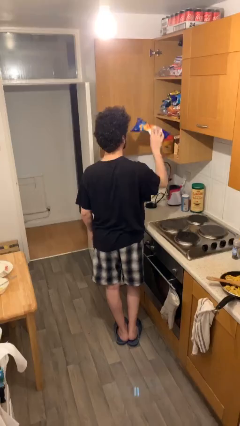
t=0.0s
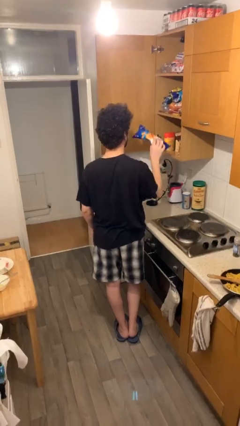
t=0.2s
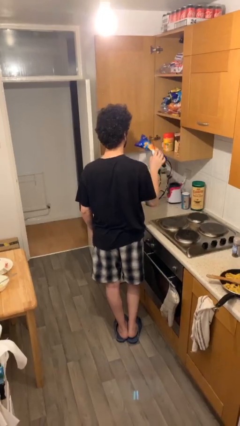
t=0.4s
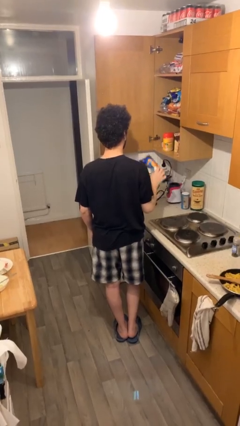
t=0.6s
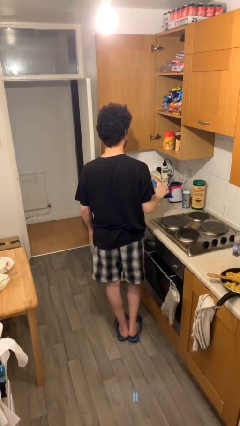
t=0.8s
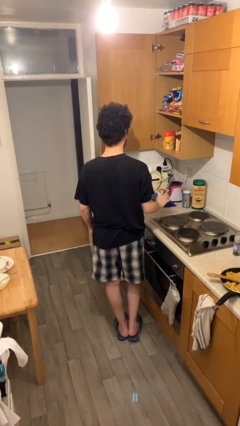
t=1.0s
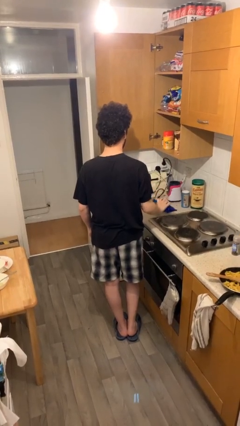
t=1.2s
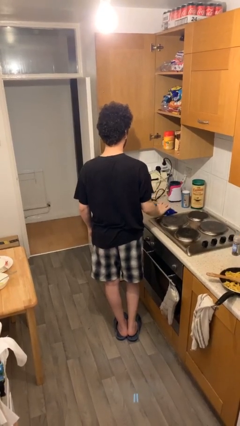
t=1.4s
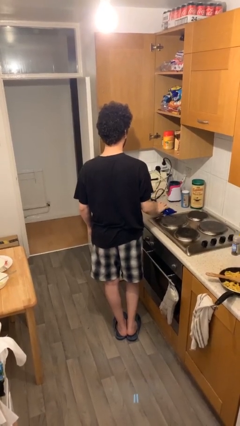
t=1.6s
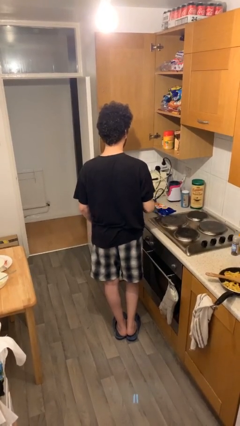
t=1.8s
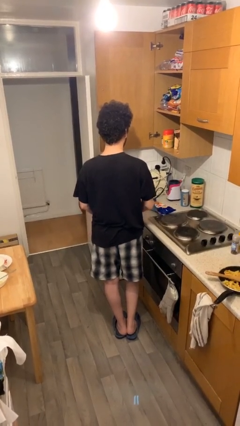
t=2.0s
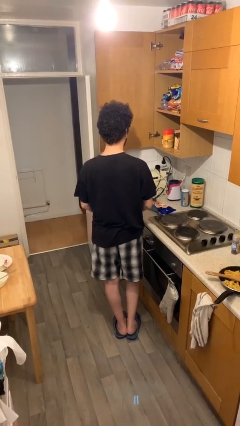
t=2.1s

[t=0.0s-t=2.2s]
person puts down object on table

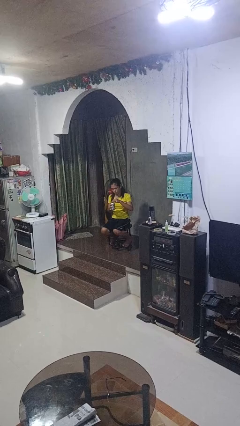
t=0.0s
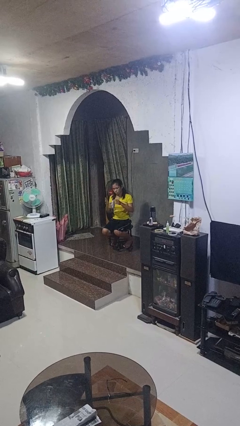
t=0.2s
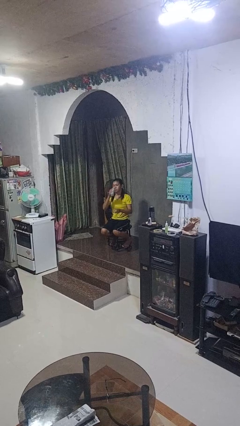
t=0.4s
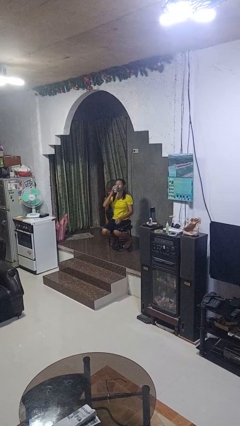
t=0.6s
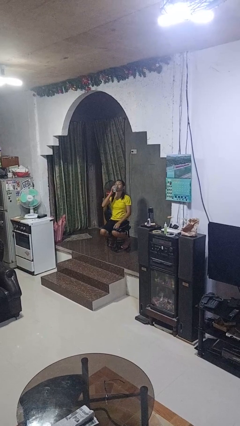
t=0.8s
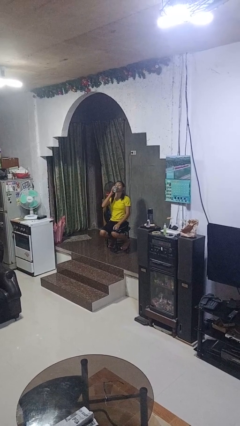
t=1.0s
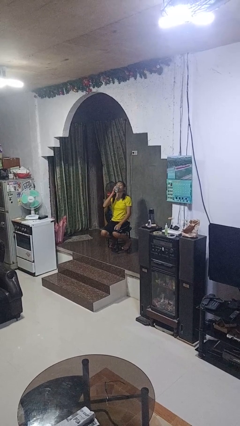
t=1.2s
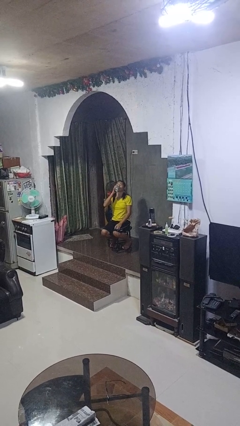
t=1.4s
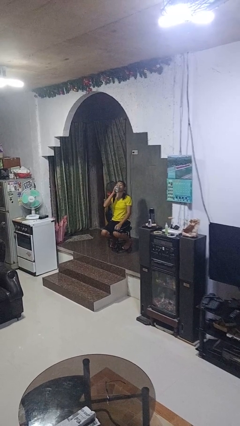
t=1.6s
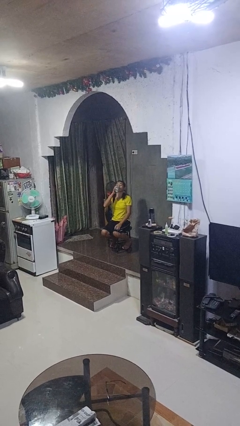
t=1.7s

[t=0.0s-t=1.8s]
person drinks from beverage can

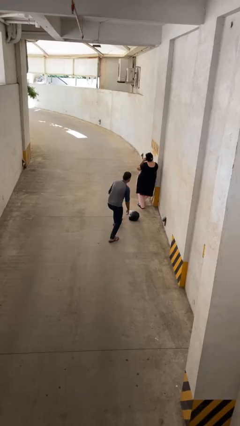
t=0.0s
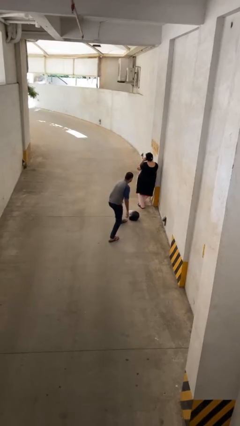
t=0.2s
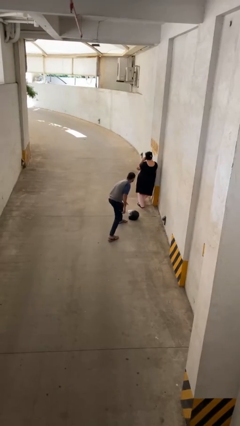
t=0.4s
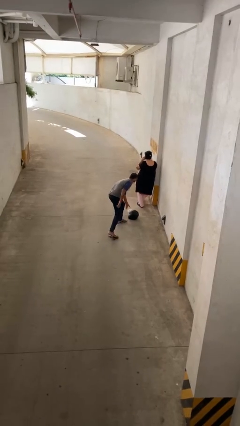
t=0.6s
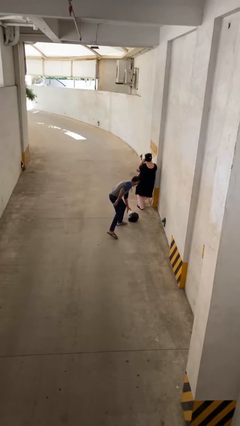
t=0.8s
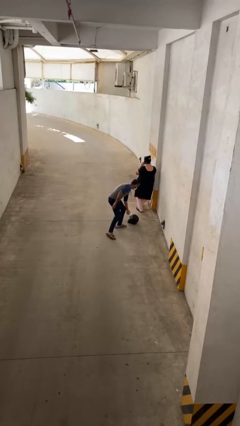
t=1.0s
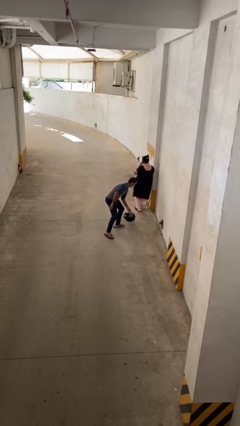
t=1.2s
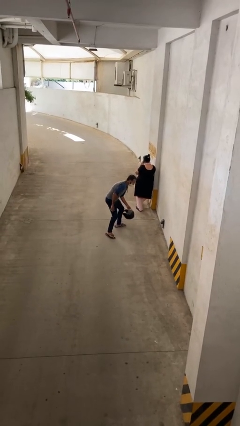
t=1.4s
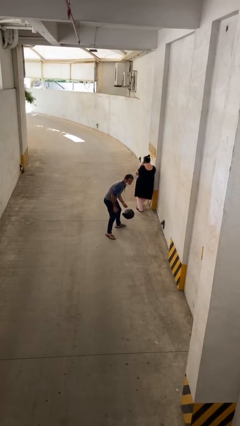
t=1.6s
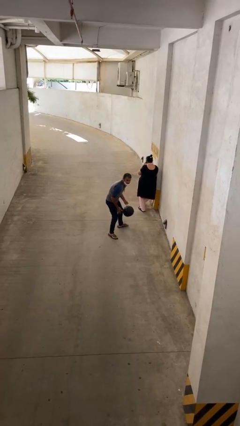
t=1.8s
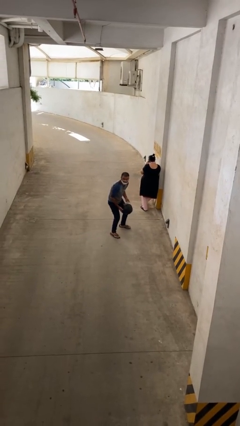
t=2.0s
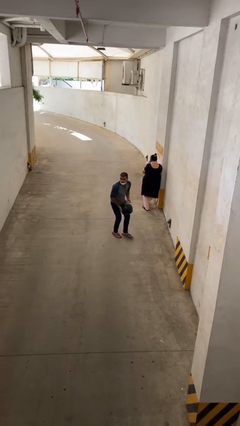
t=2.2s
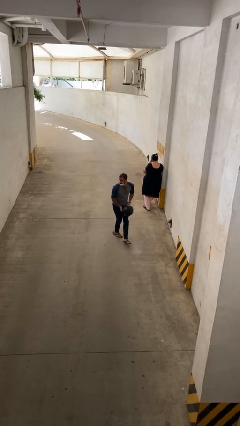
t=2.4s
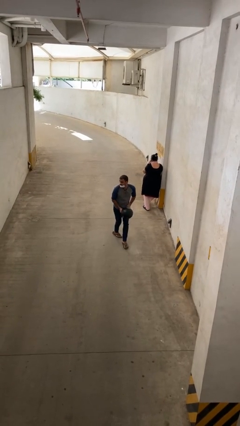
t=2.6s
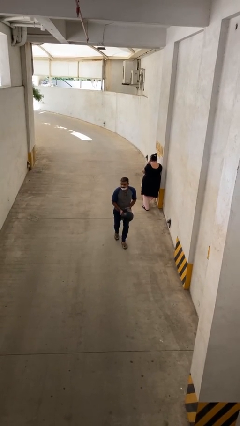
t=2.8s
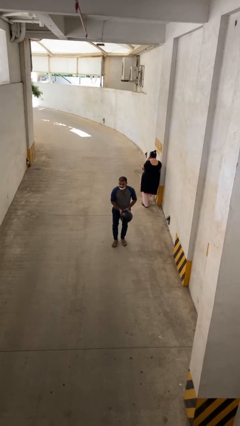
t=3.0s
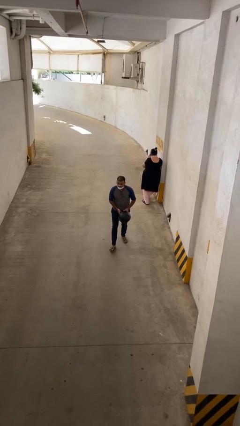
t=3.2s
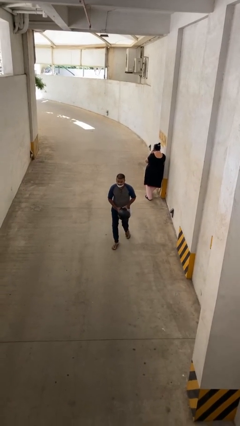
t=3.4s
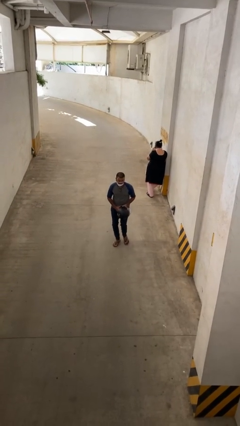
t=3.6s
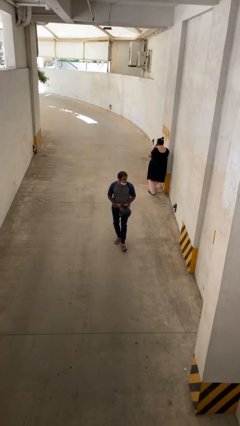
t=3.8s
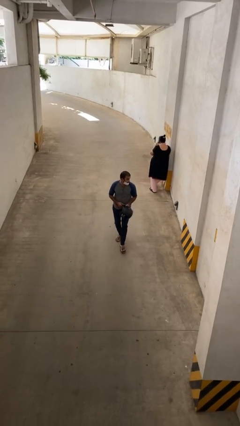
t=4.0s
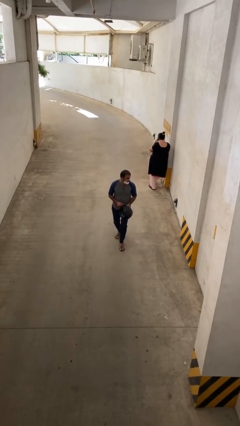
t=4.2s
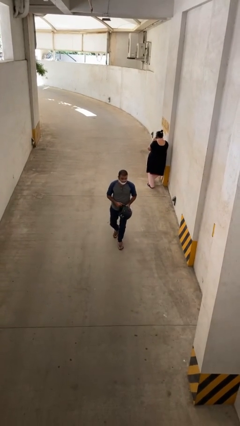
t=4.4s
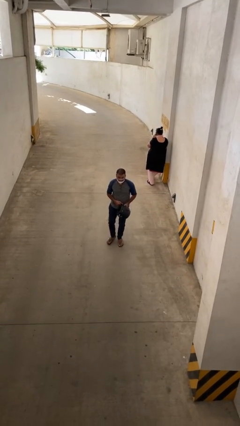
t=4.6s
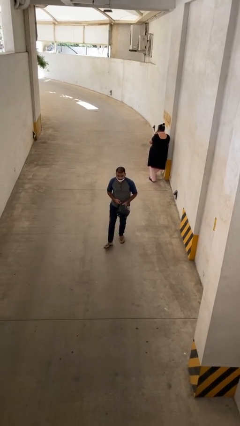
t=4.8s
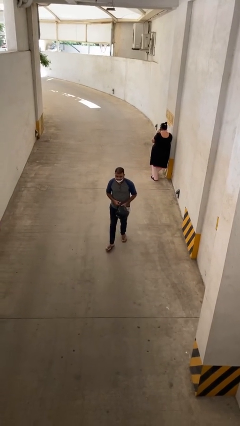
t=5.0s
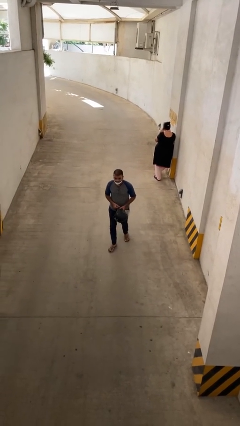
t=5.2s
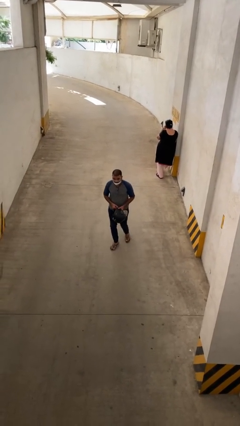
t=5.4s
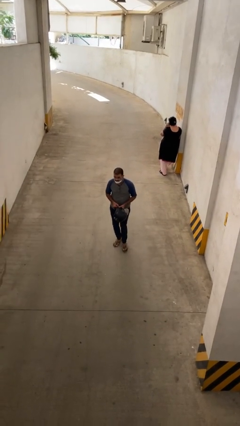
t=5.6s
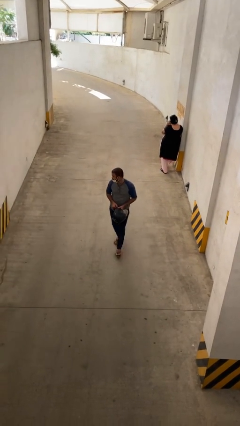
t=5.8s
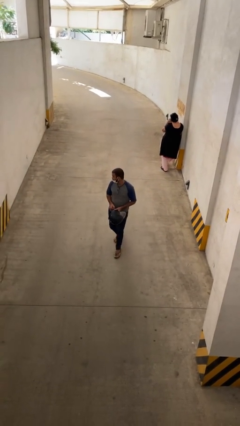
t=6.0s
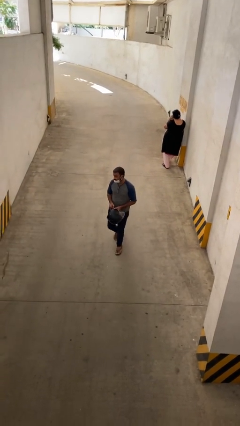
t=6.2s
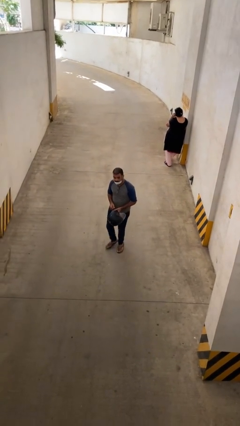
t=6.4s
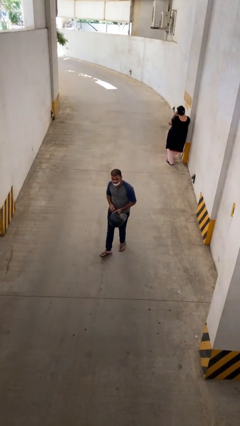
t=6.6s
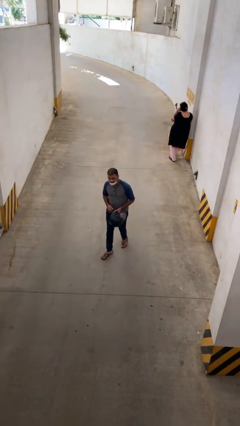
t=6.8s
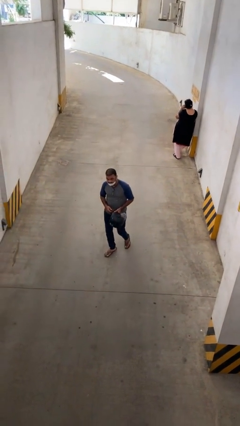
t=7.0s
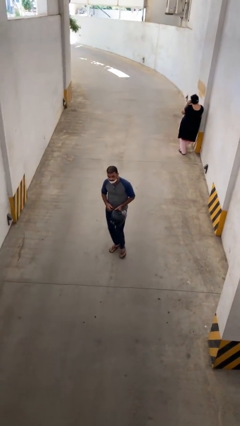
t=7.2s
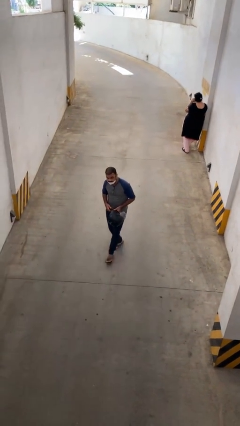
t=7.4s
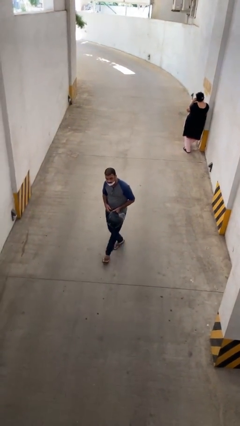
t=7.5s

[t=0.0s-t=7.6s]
person steals object from person

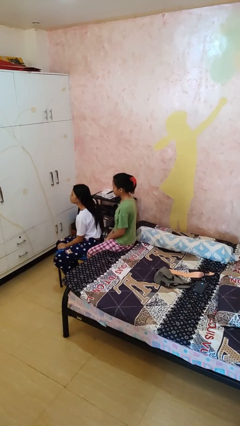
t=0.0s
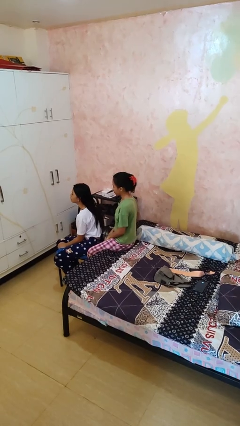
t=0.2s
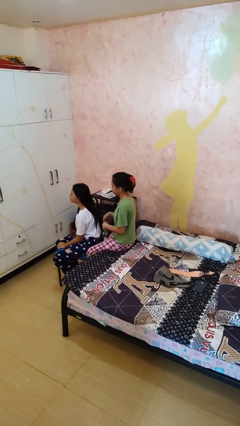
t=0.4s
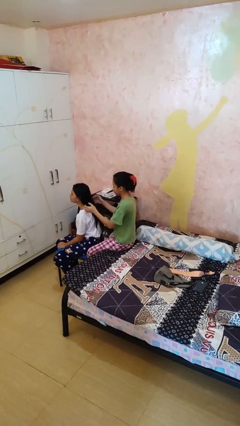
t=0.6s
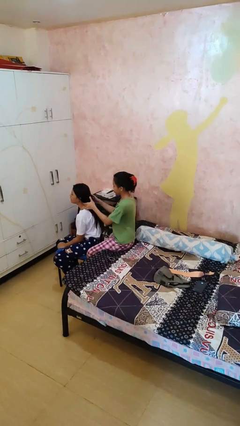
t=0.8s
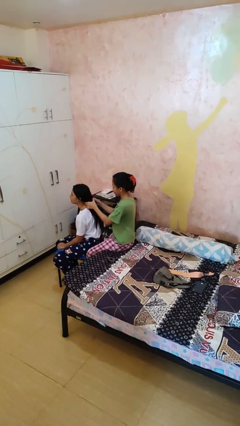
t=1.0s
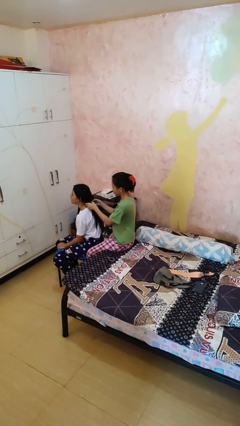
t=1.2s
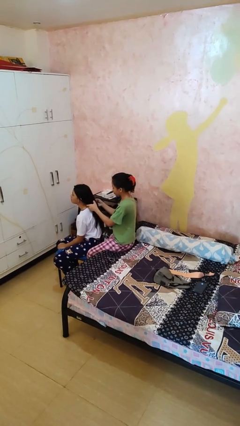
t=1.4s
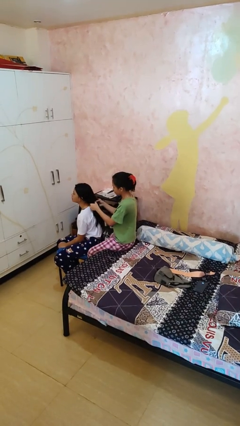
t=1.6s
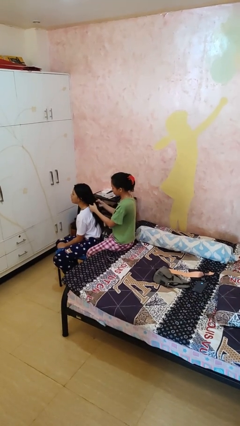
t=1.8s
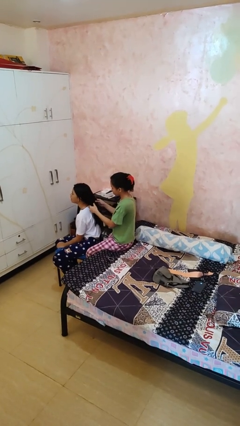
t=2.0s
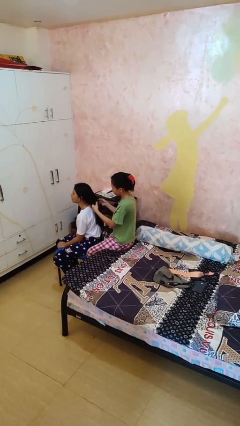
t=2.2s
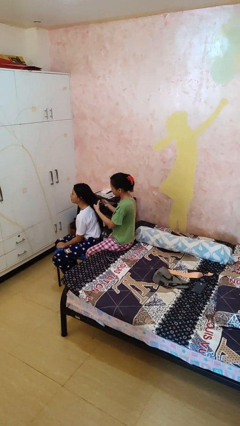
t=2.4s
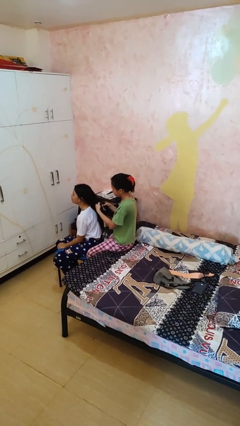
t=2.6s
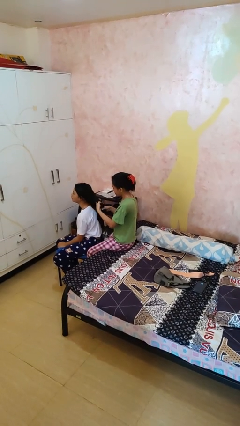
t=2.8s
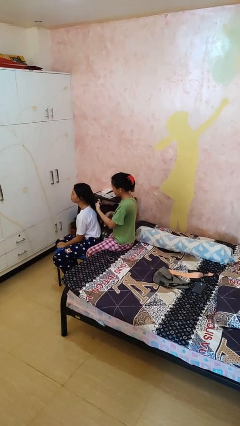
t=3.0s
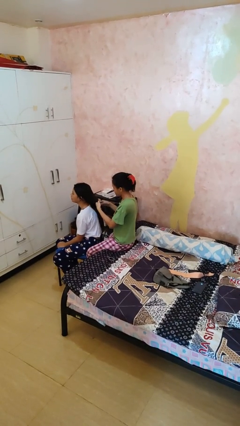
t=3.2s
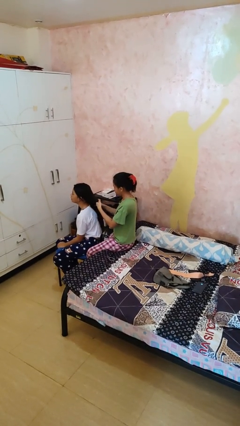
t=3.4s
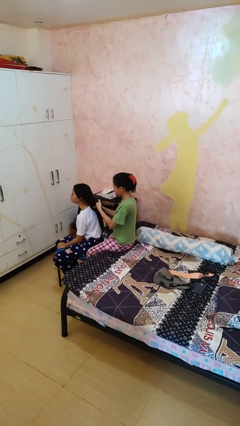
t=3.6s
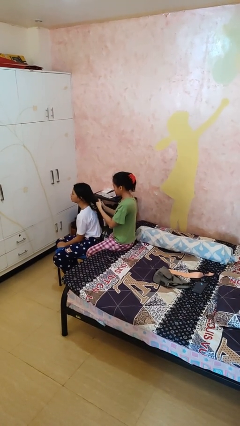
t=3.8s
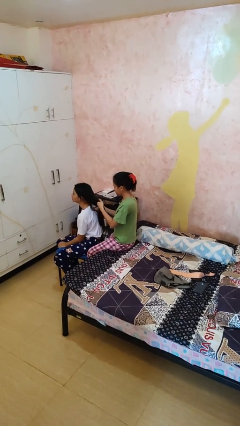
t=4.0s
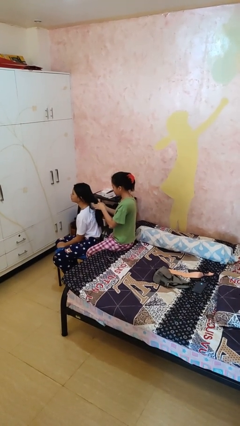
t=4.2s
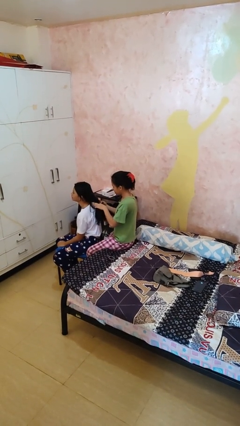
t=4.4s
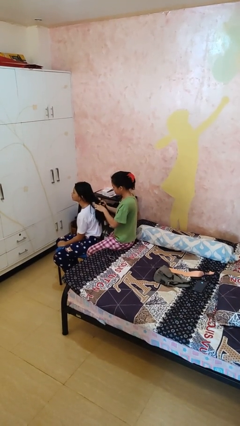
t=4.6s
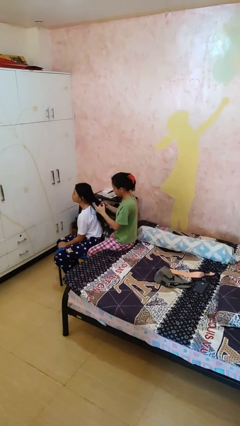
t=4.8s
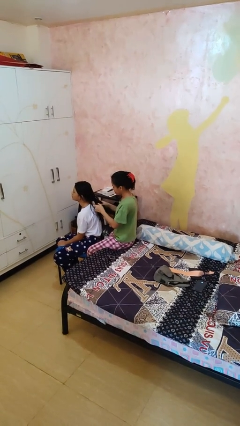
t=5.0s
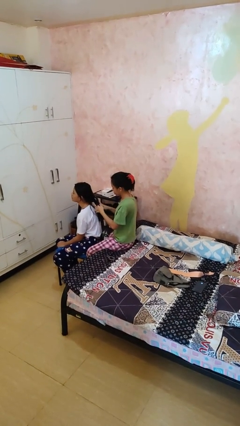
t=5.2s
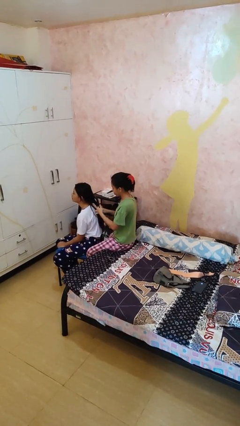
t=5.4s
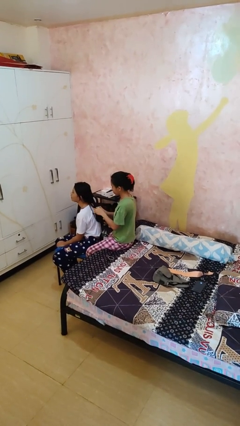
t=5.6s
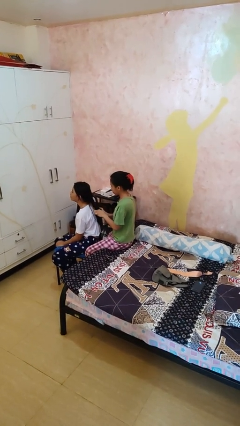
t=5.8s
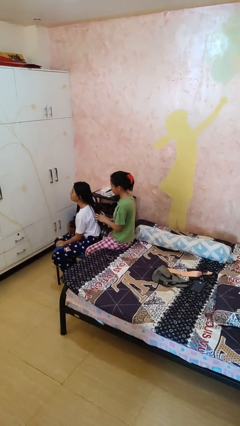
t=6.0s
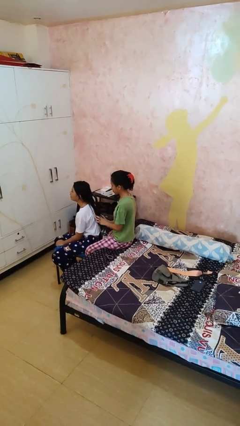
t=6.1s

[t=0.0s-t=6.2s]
person braids hair of person

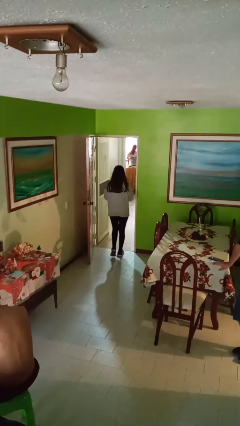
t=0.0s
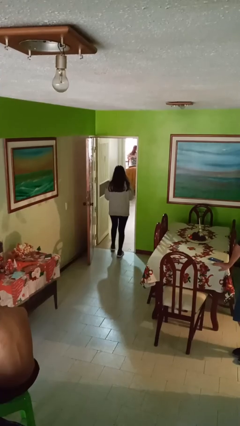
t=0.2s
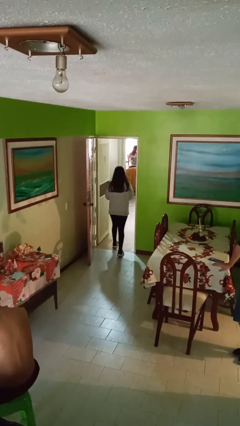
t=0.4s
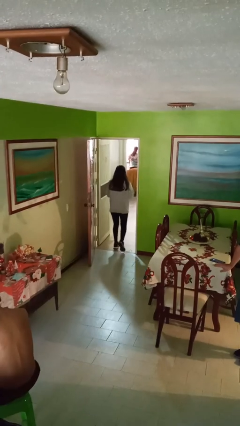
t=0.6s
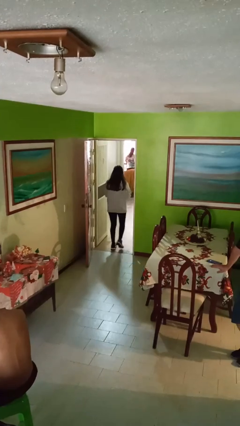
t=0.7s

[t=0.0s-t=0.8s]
person exits scene through structure
